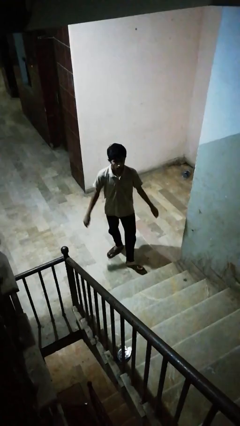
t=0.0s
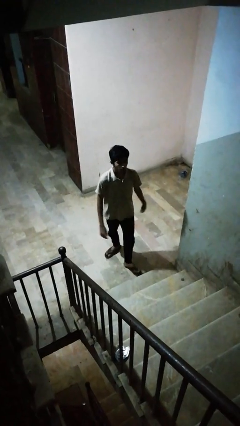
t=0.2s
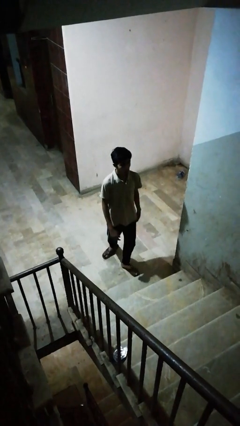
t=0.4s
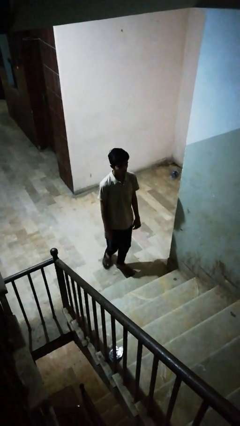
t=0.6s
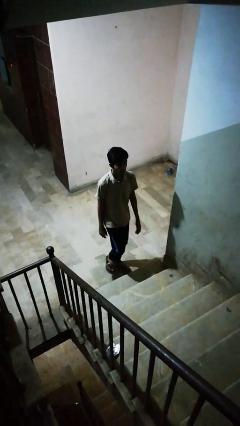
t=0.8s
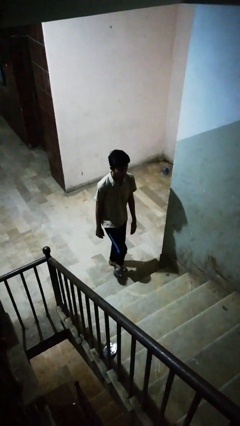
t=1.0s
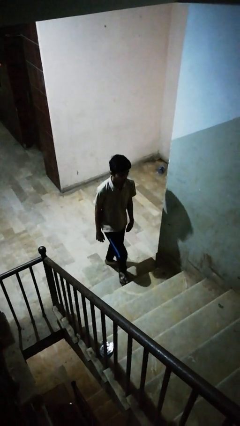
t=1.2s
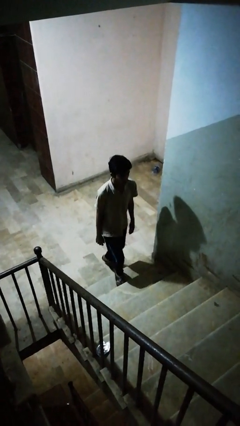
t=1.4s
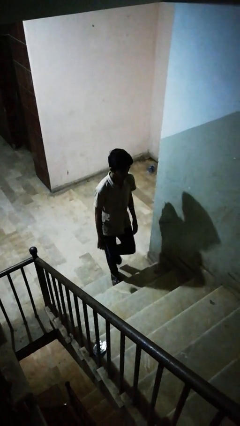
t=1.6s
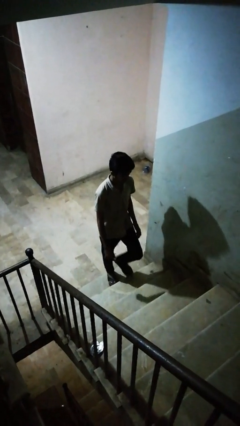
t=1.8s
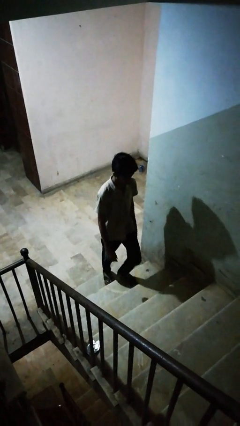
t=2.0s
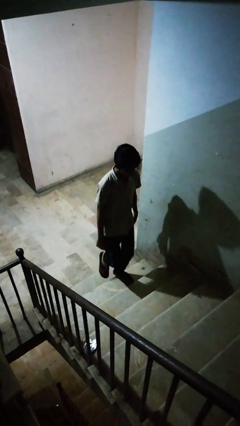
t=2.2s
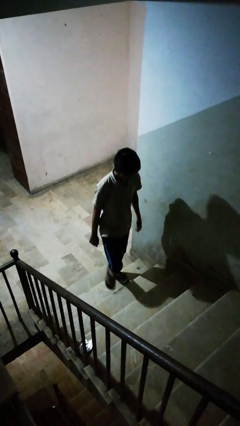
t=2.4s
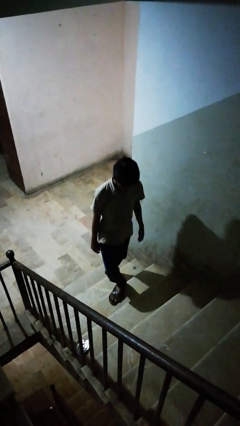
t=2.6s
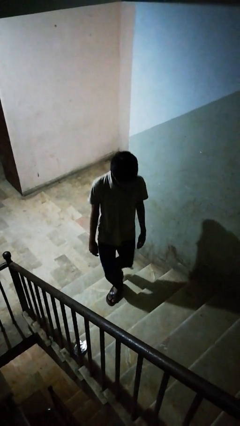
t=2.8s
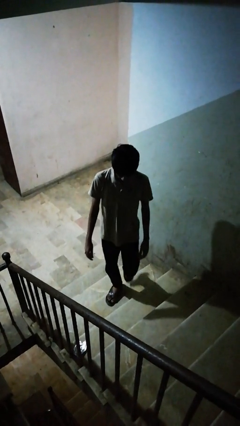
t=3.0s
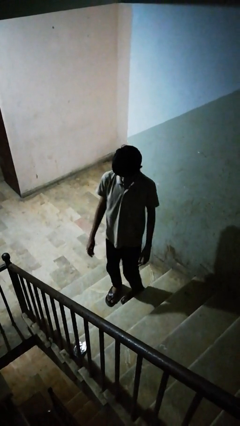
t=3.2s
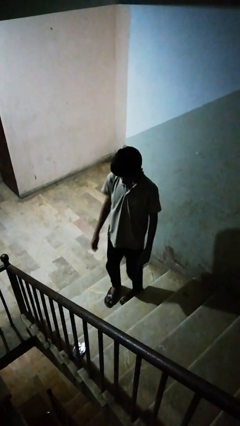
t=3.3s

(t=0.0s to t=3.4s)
person climbs up stairs

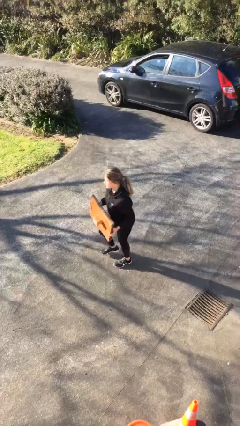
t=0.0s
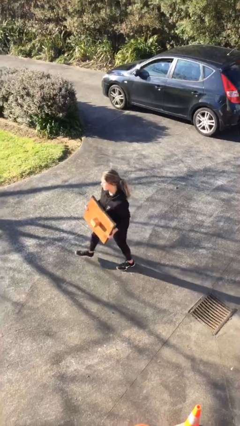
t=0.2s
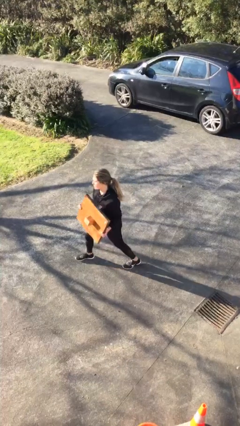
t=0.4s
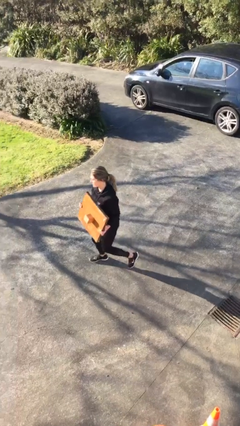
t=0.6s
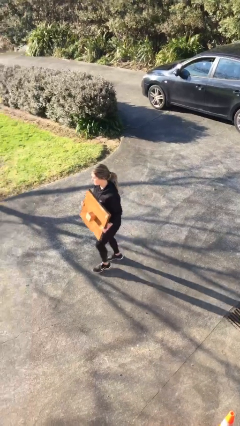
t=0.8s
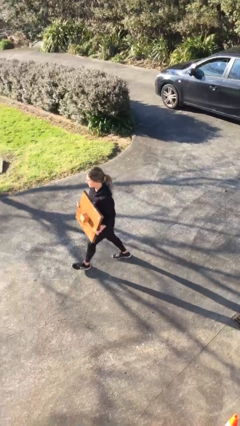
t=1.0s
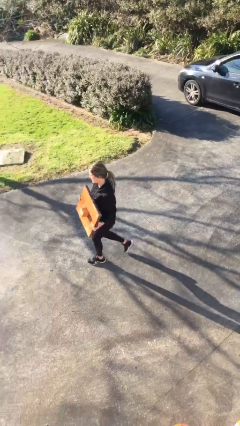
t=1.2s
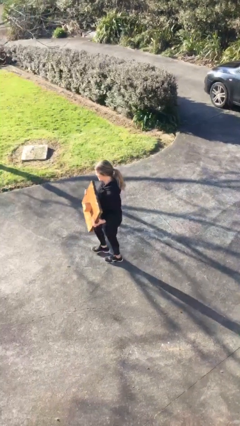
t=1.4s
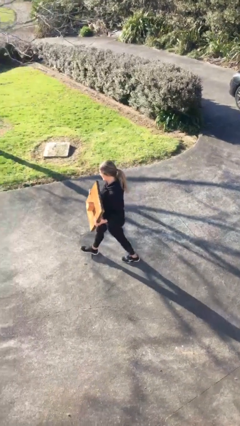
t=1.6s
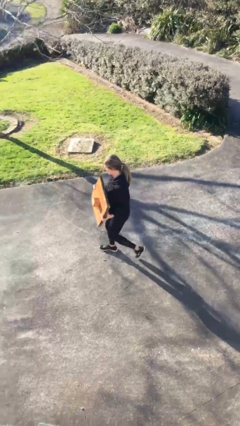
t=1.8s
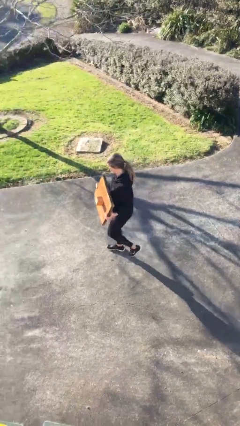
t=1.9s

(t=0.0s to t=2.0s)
person carries heavy object

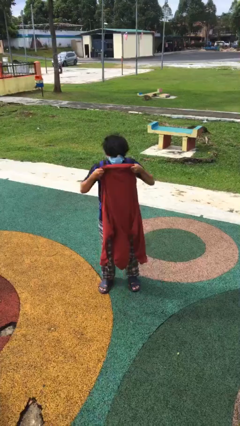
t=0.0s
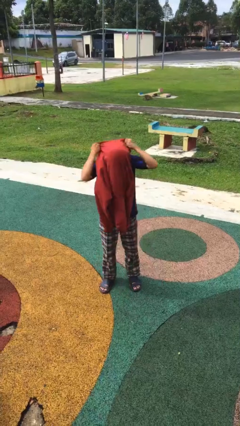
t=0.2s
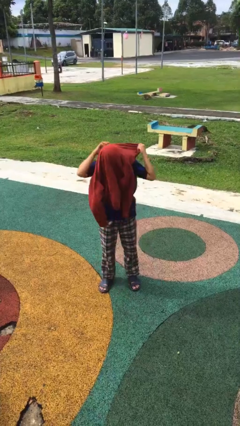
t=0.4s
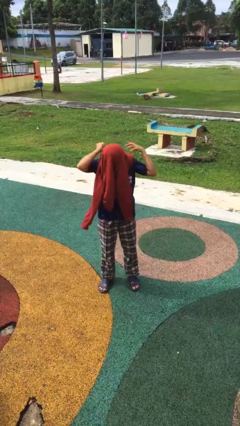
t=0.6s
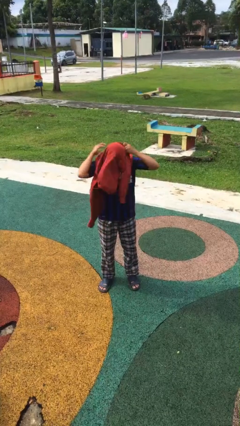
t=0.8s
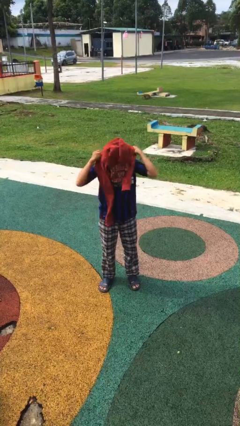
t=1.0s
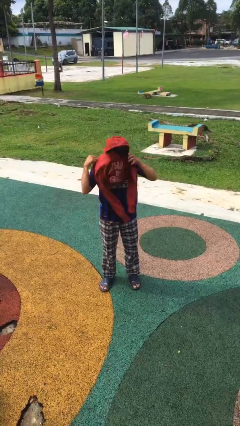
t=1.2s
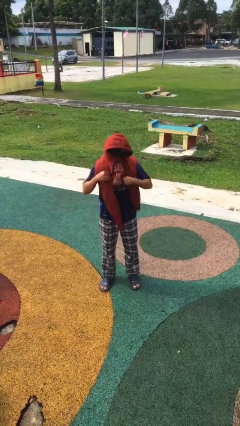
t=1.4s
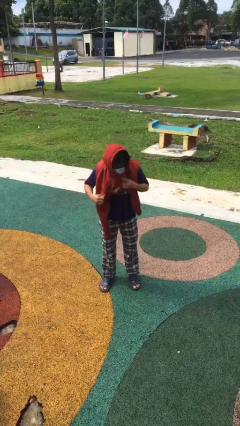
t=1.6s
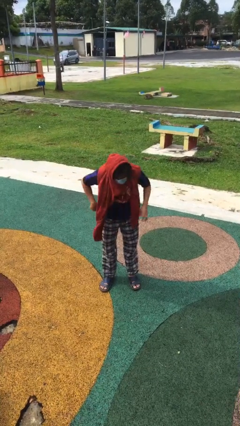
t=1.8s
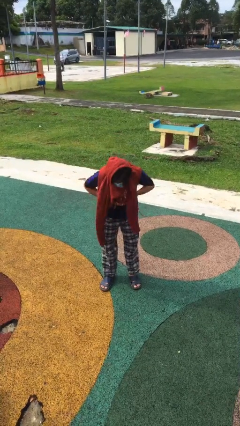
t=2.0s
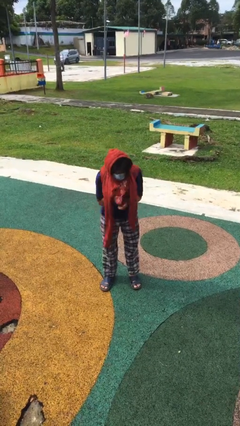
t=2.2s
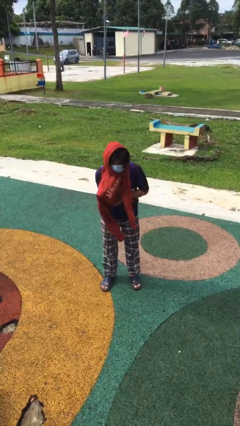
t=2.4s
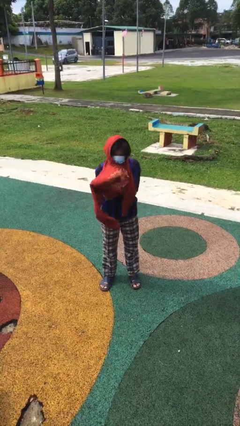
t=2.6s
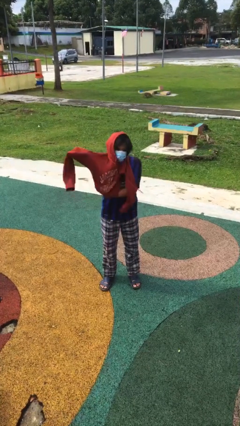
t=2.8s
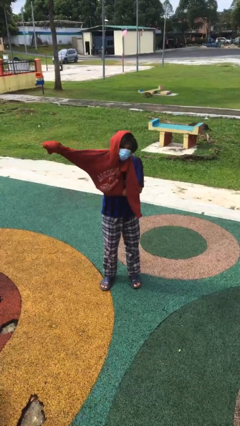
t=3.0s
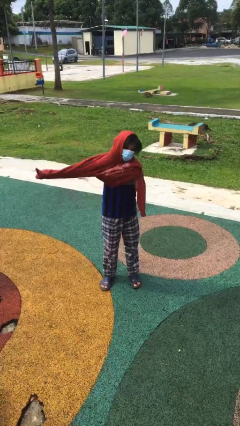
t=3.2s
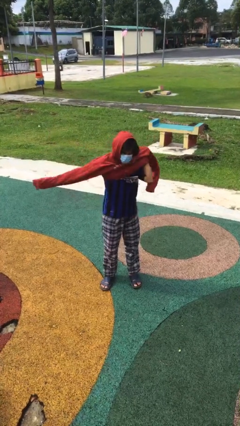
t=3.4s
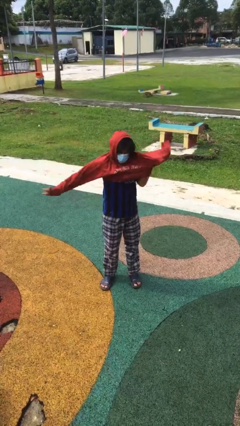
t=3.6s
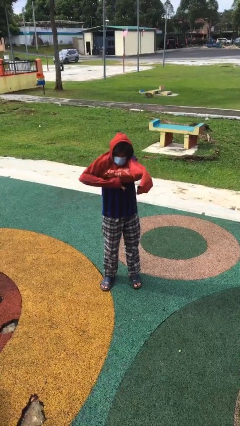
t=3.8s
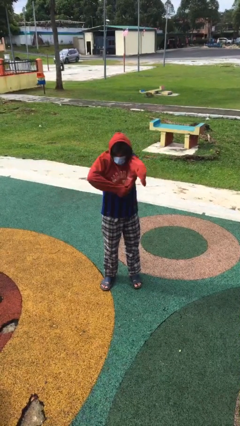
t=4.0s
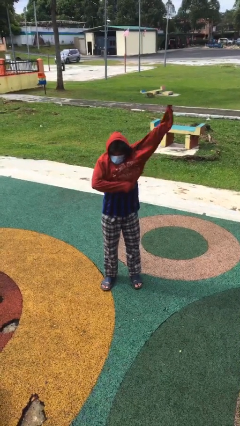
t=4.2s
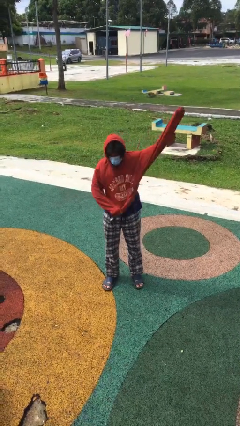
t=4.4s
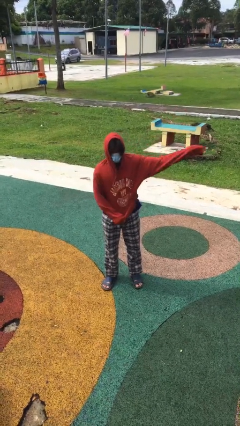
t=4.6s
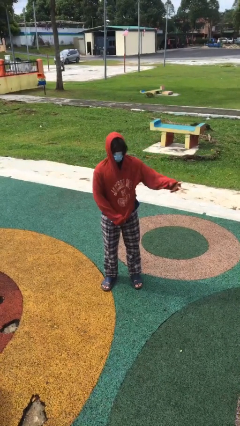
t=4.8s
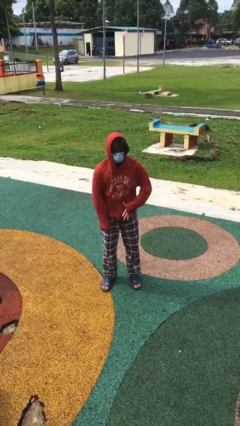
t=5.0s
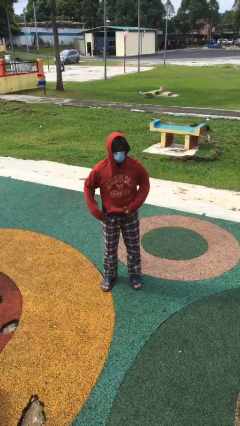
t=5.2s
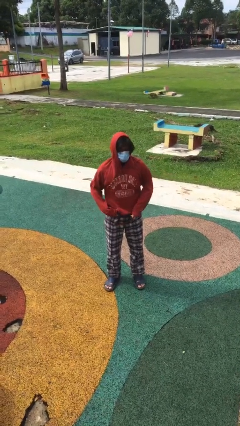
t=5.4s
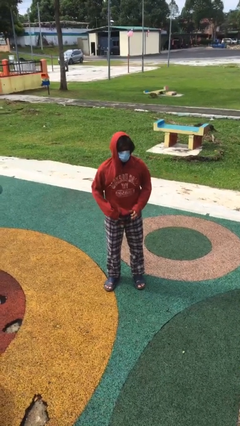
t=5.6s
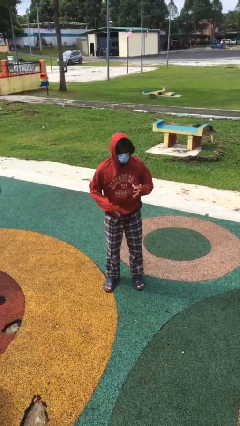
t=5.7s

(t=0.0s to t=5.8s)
person puts on hoodie

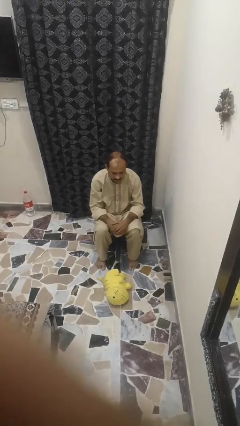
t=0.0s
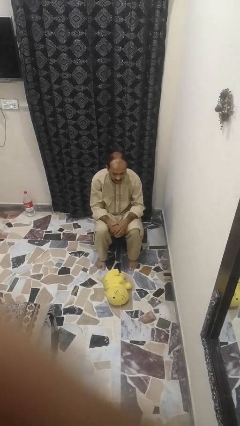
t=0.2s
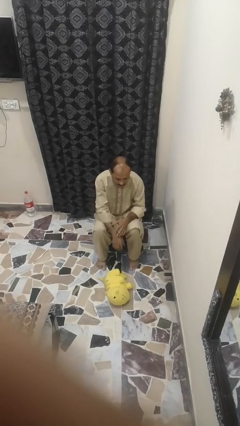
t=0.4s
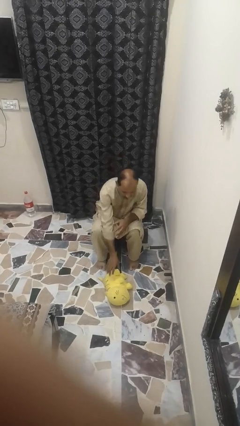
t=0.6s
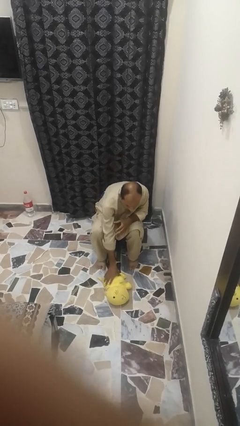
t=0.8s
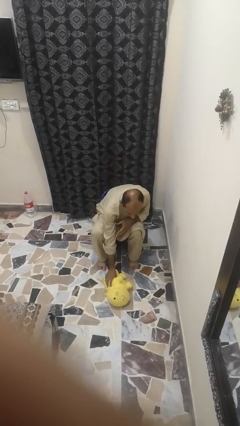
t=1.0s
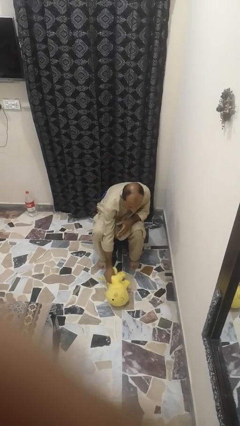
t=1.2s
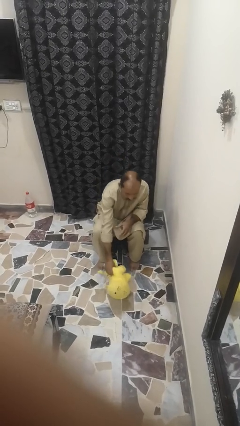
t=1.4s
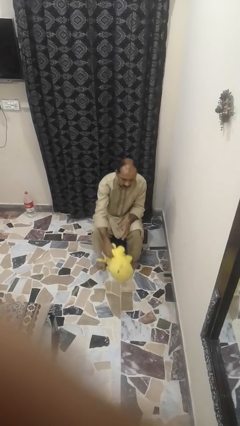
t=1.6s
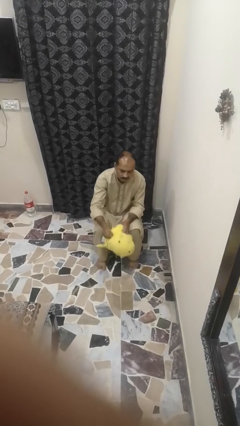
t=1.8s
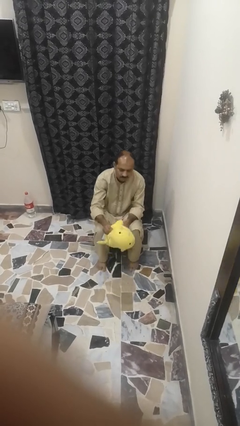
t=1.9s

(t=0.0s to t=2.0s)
person picks up object from floor

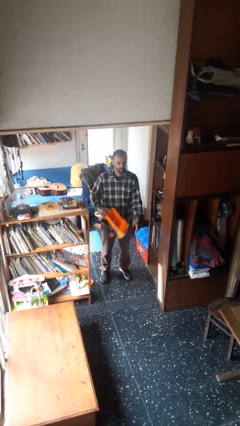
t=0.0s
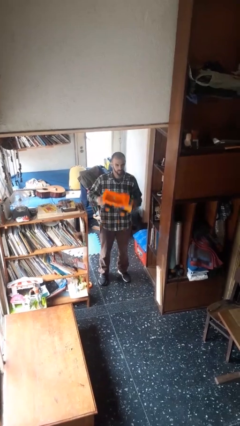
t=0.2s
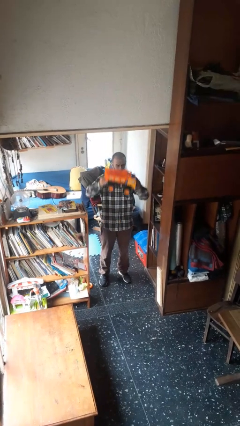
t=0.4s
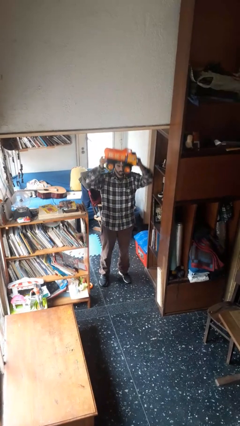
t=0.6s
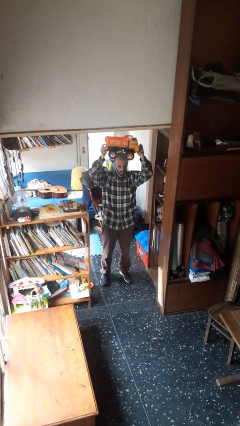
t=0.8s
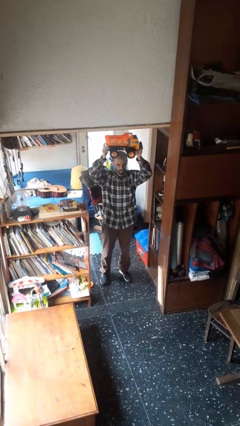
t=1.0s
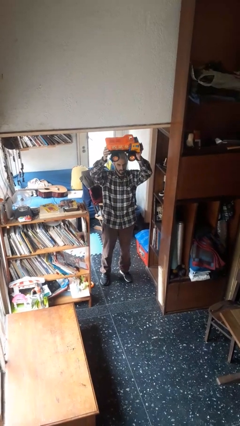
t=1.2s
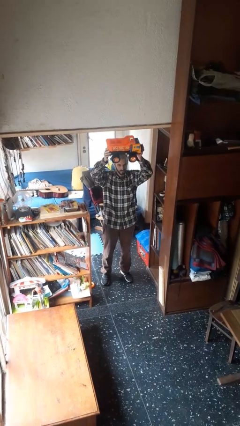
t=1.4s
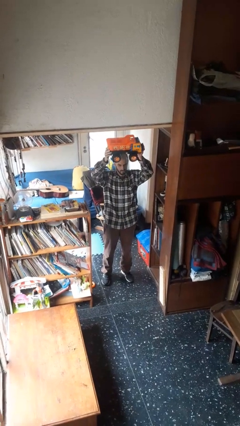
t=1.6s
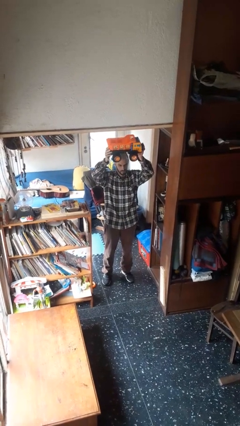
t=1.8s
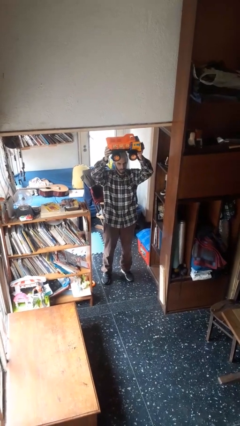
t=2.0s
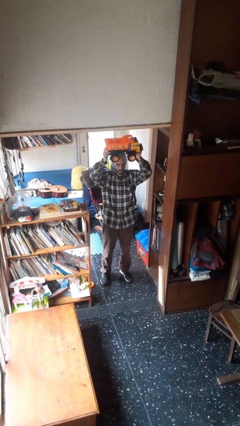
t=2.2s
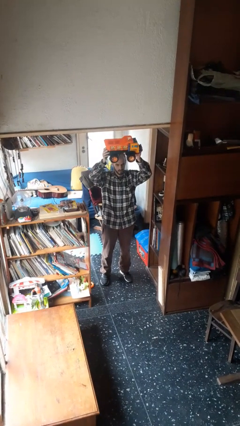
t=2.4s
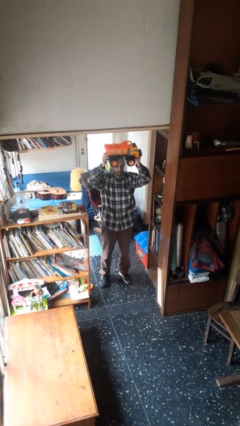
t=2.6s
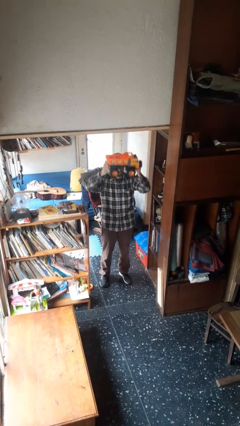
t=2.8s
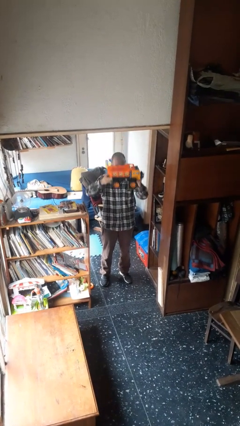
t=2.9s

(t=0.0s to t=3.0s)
person holds object above head

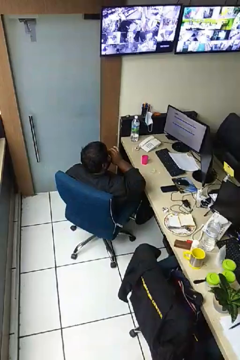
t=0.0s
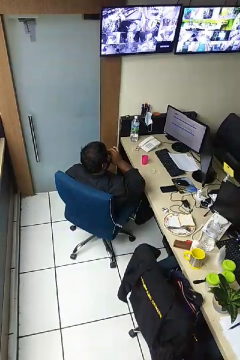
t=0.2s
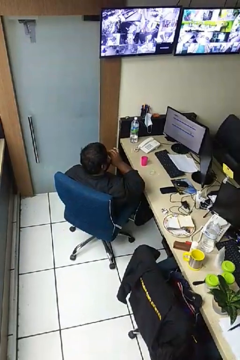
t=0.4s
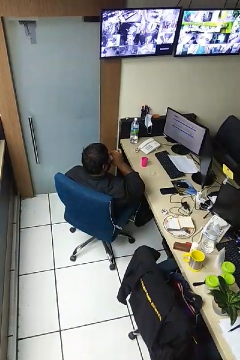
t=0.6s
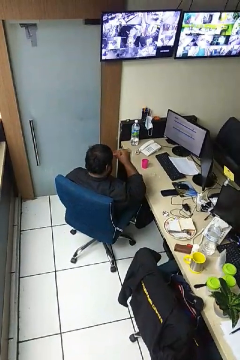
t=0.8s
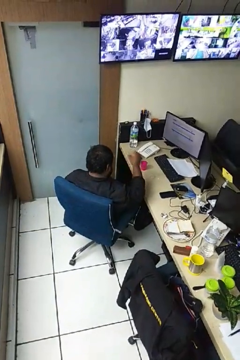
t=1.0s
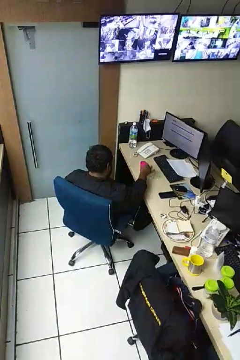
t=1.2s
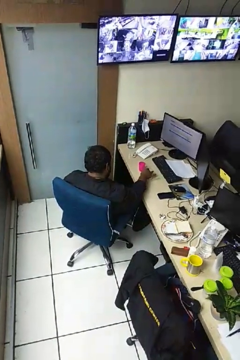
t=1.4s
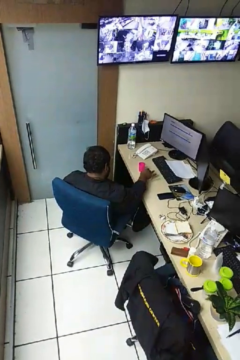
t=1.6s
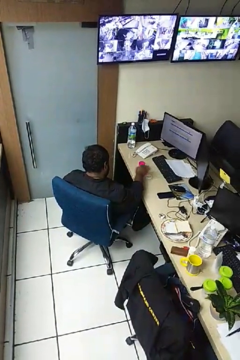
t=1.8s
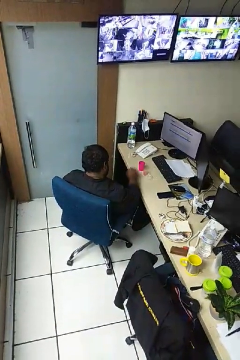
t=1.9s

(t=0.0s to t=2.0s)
person puts down object on table
